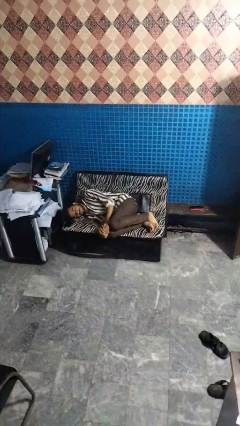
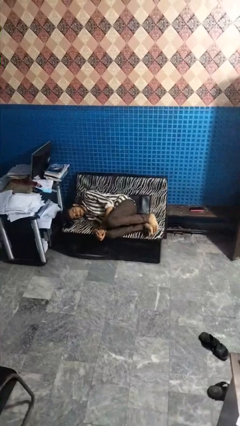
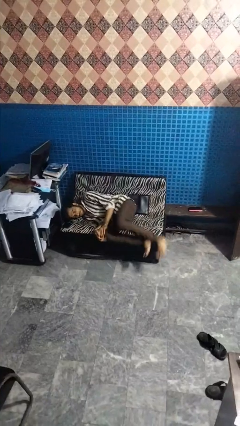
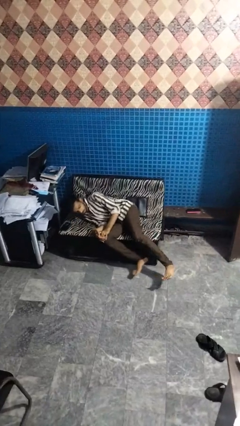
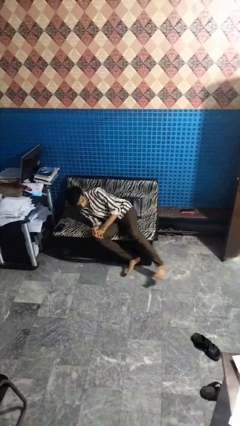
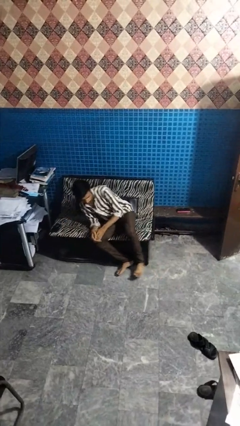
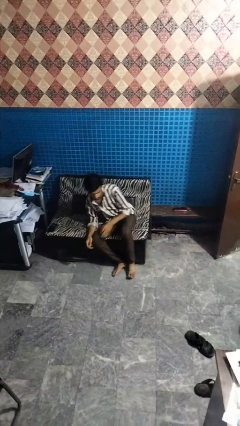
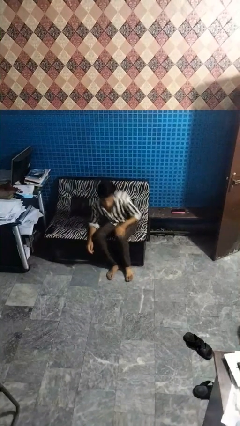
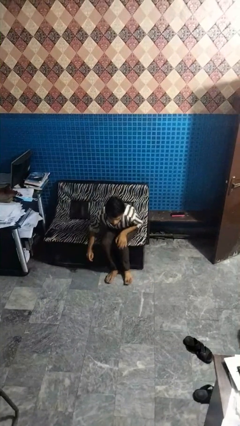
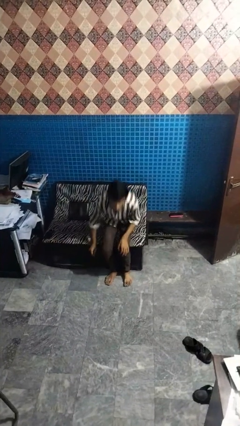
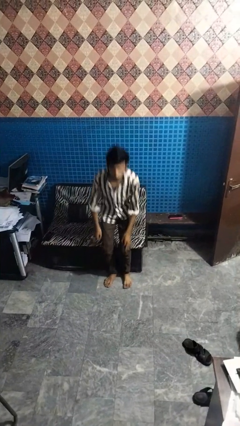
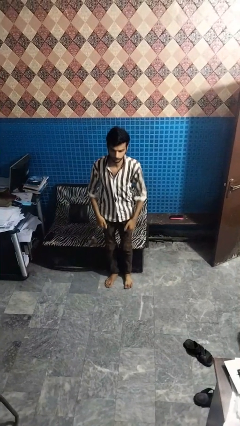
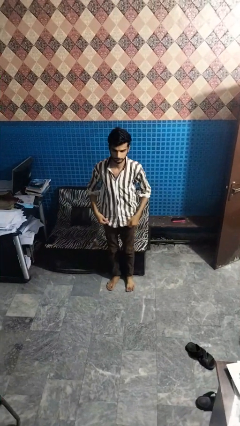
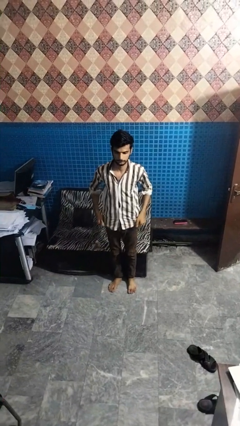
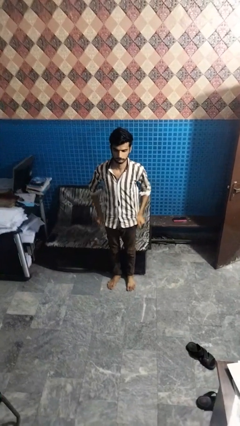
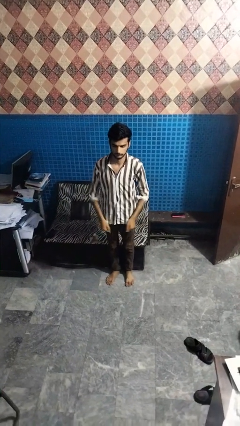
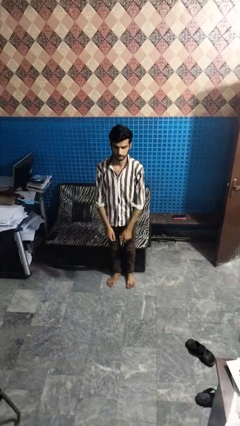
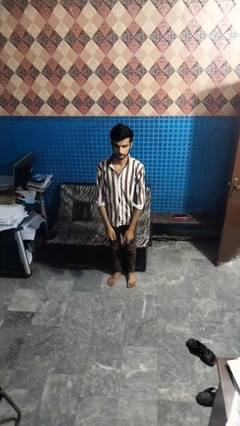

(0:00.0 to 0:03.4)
person stands up

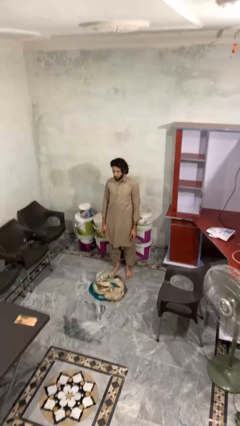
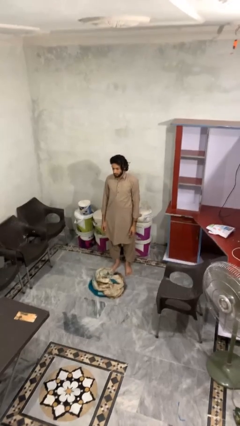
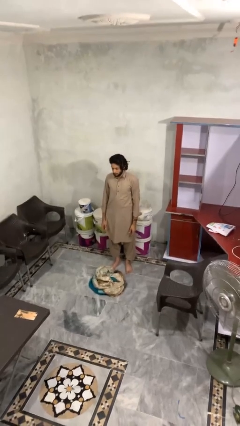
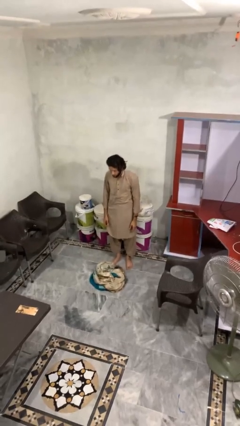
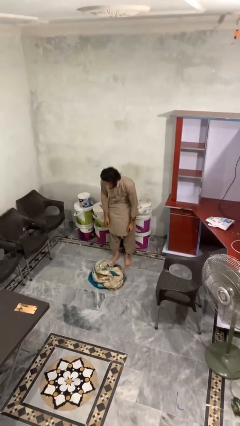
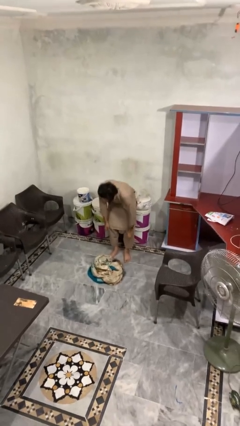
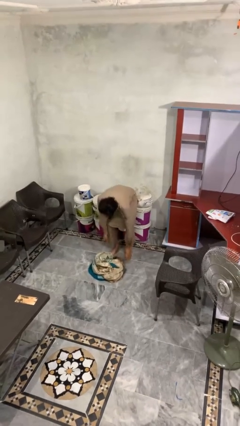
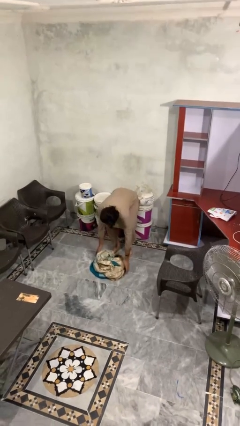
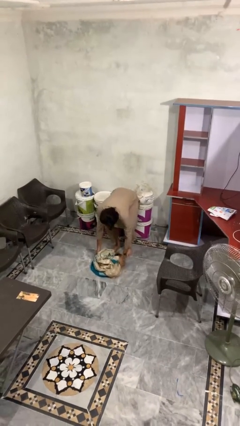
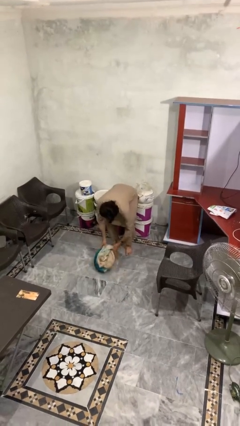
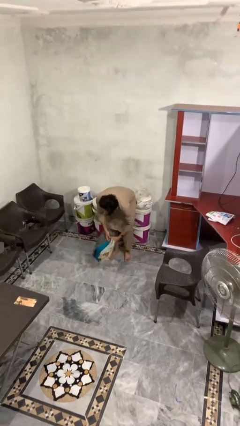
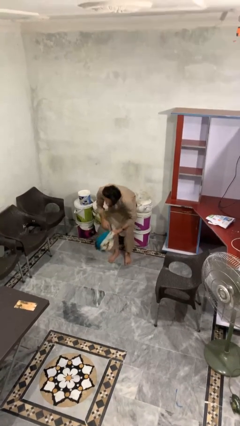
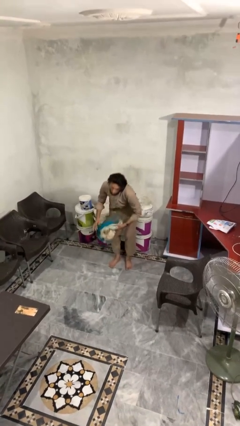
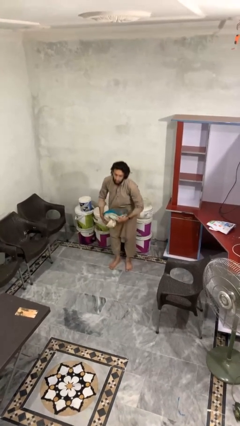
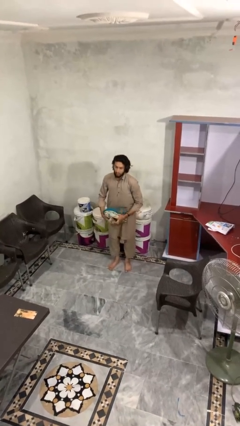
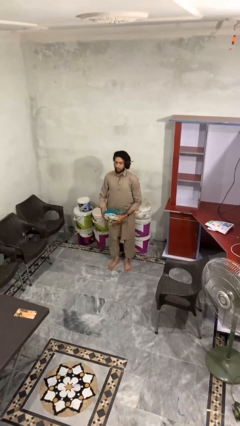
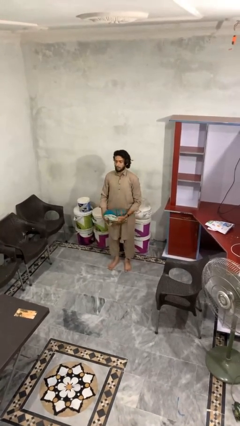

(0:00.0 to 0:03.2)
person picks up object from floor

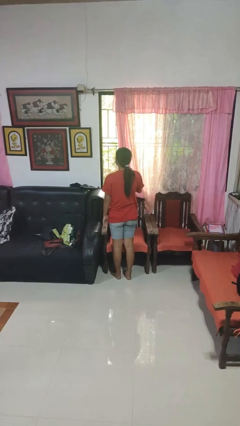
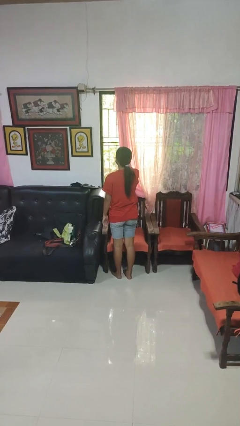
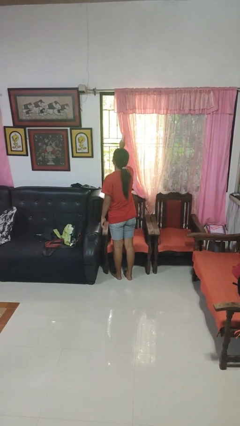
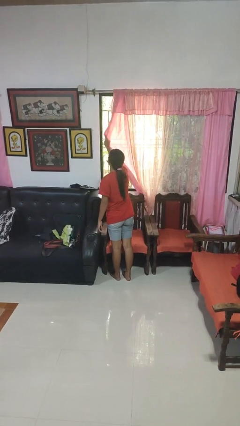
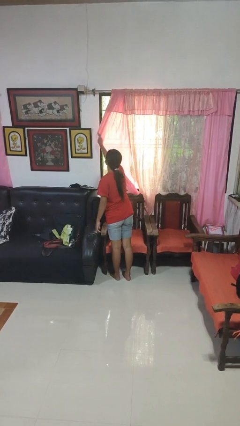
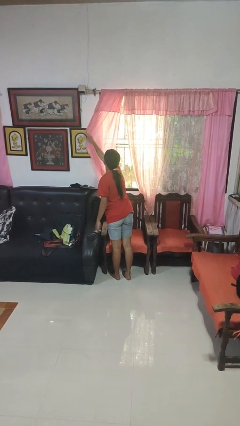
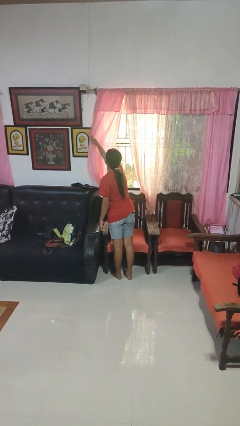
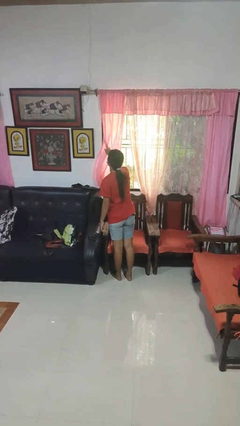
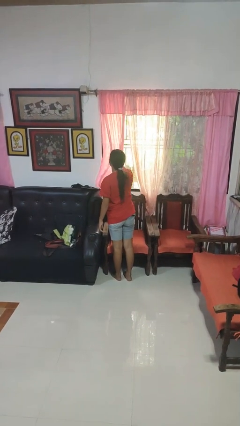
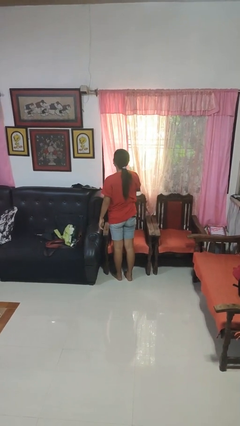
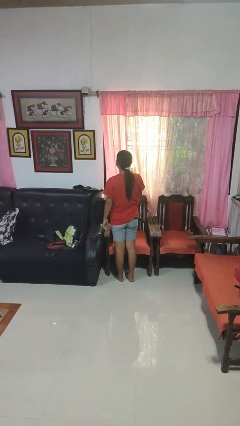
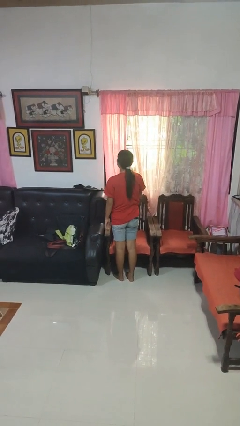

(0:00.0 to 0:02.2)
person closes curtains

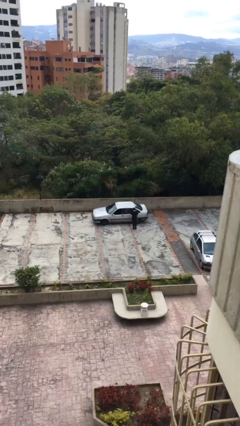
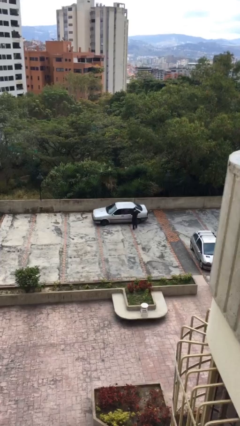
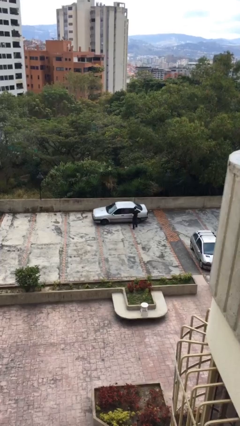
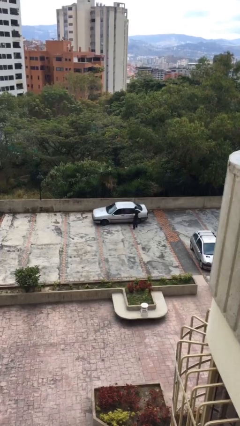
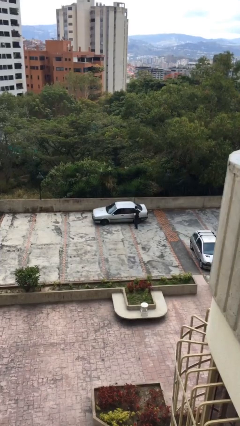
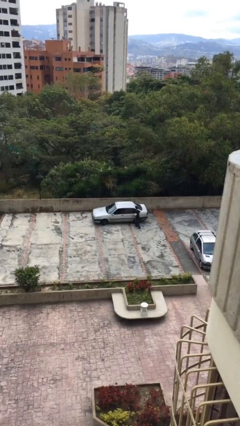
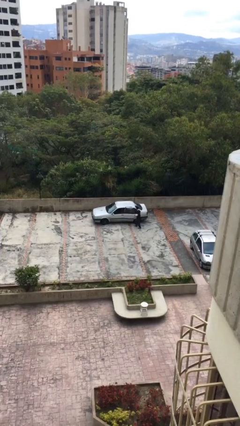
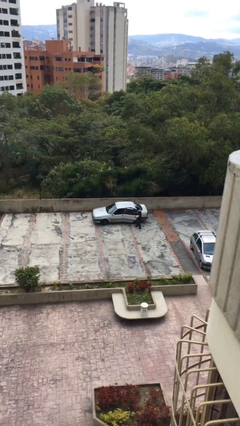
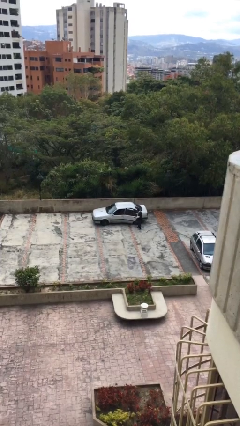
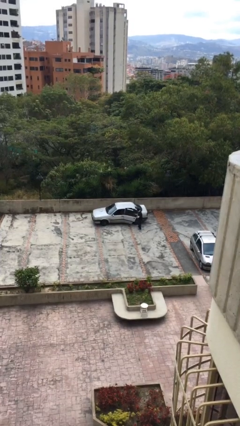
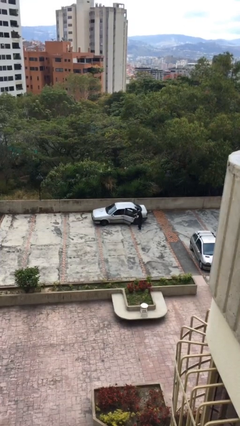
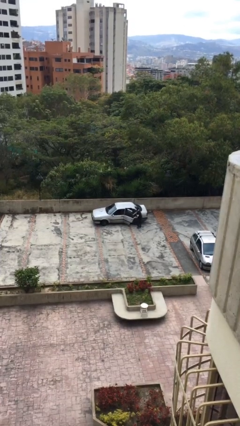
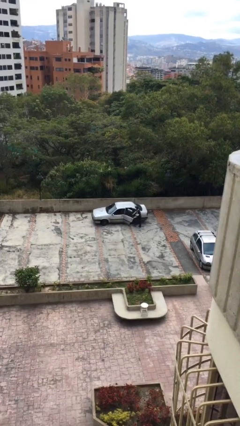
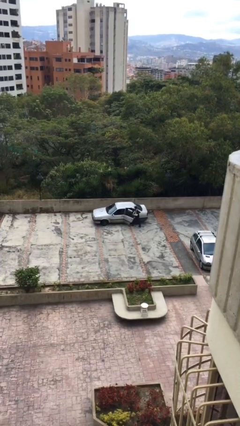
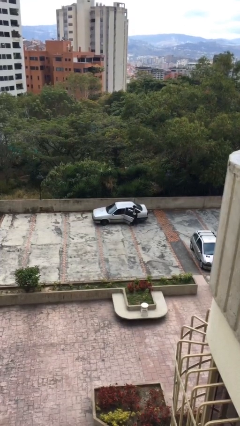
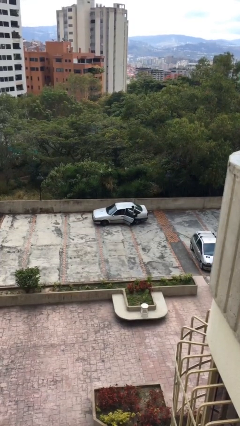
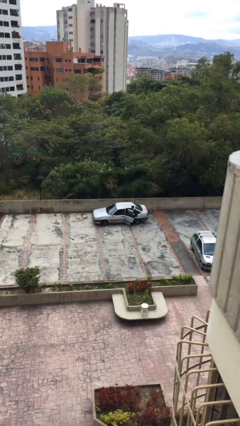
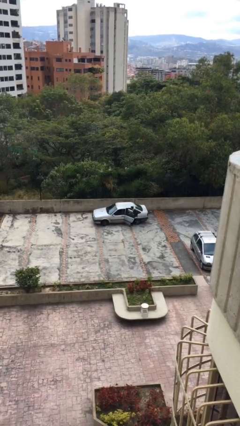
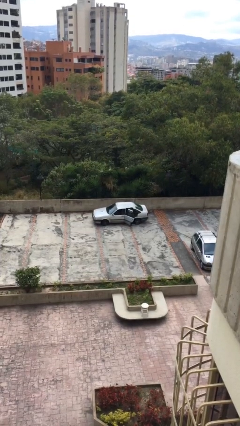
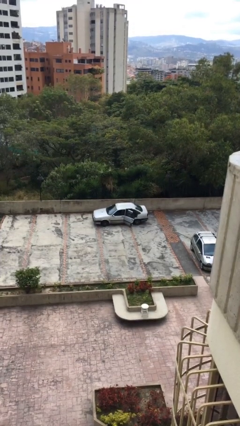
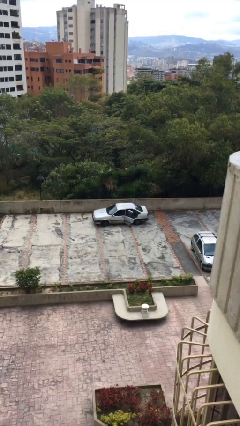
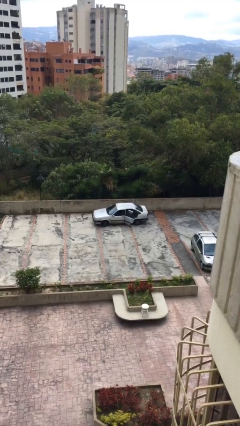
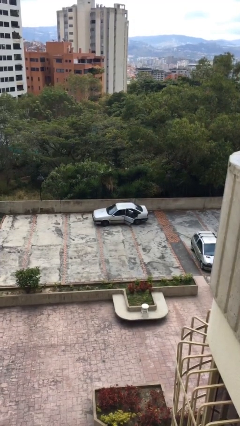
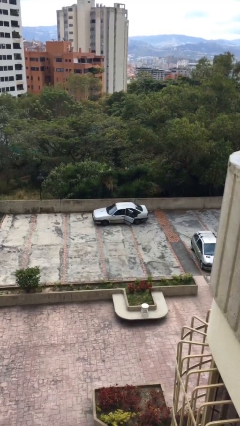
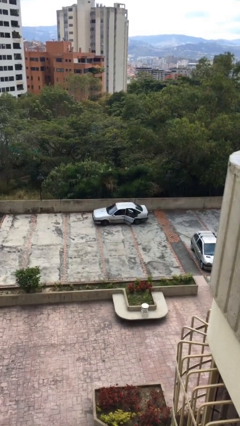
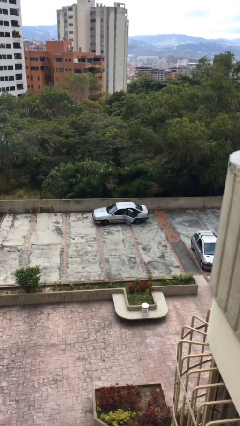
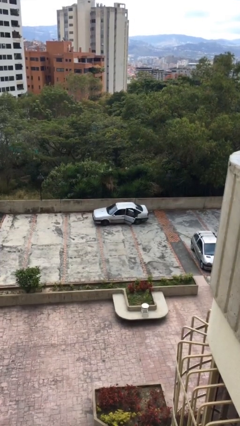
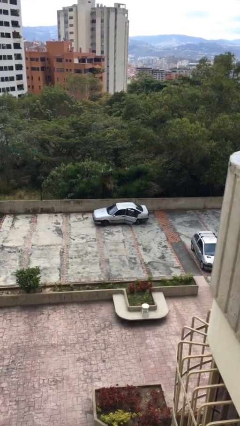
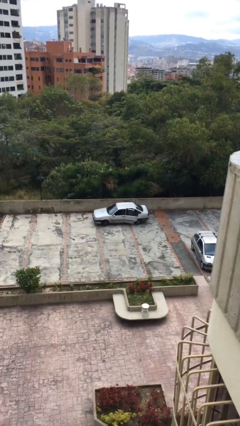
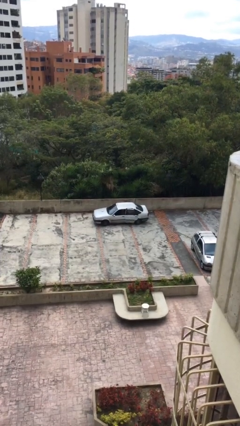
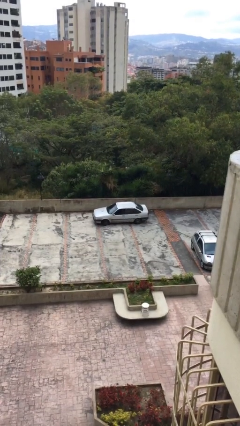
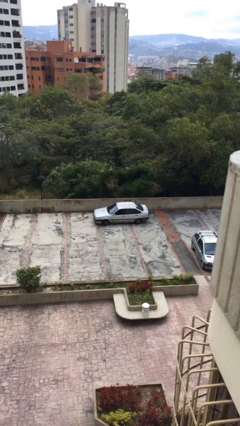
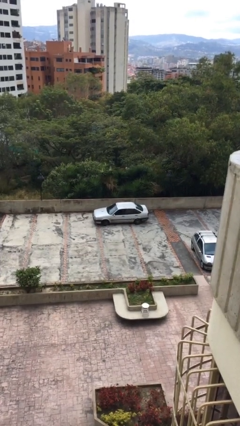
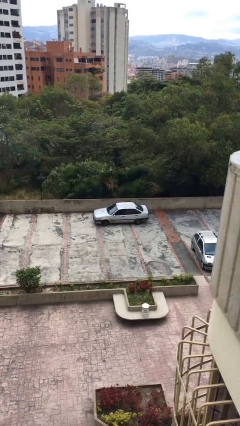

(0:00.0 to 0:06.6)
car picks up person

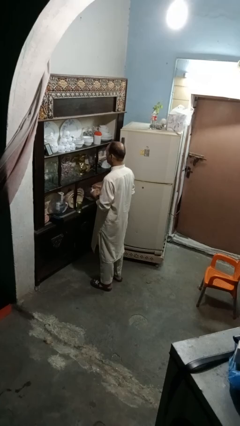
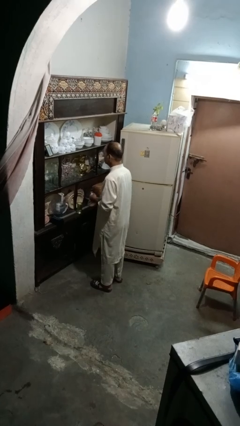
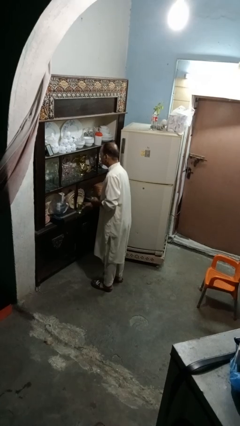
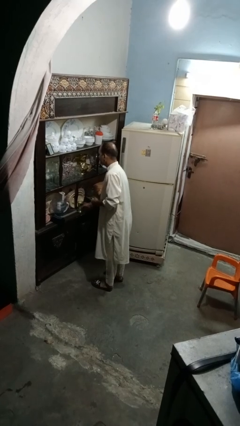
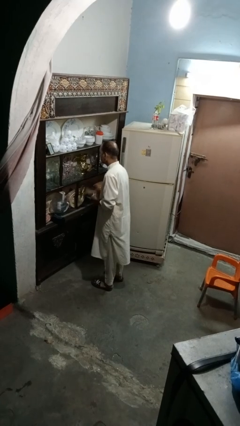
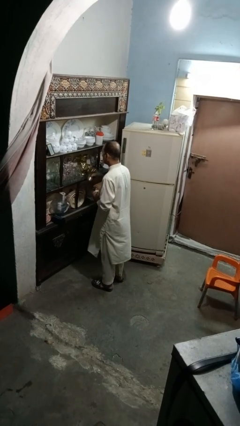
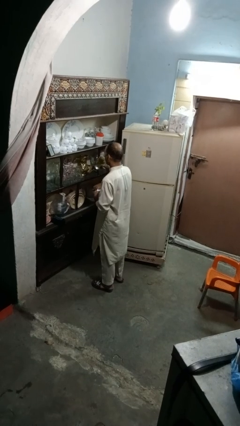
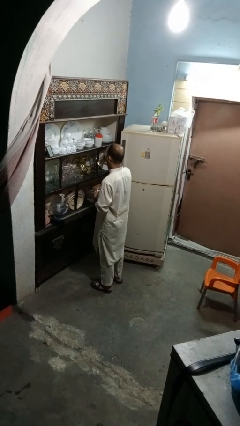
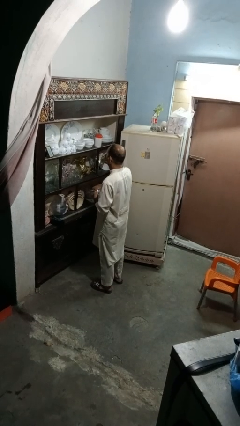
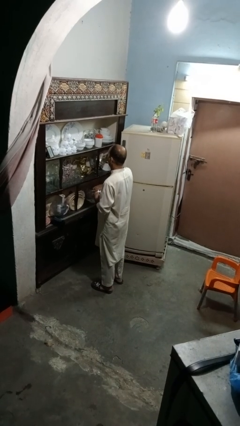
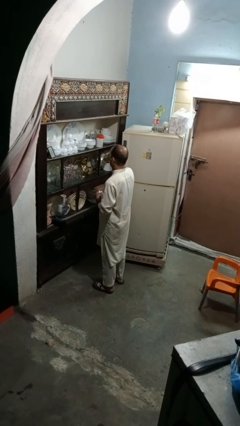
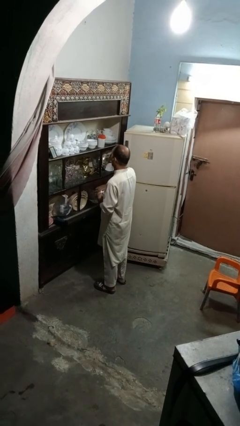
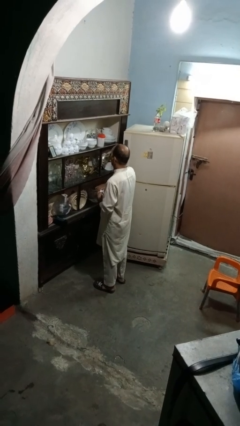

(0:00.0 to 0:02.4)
person drinks from cup
